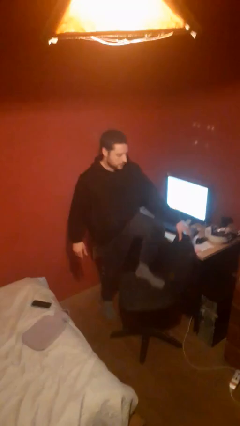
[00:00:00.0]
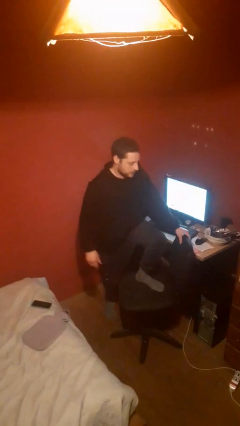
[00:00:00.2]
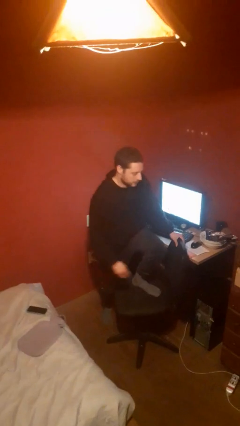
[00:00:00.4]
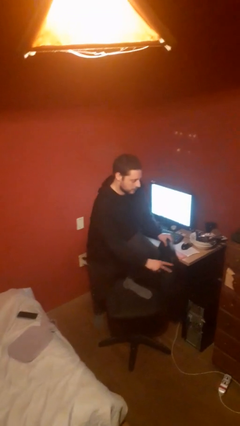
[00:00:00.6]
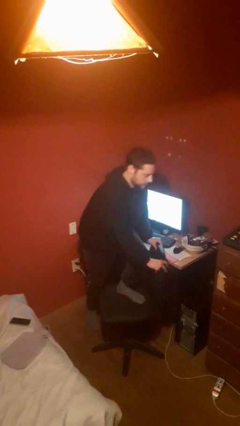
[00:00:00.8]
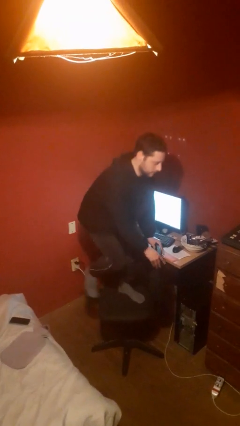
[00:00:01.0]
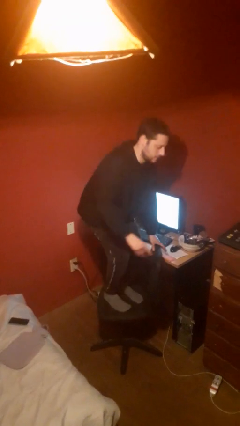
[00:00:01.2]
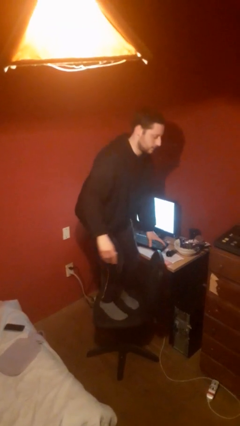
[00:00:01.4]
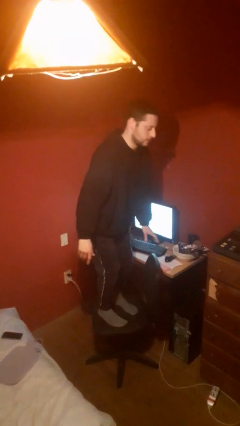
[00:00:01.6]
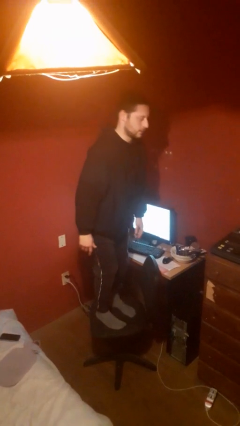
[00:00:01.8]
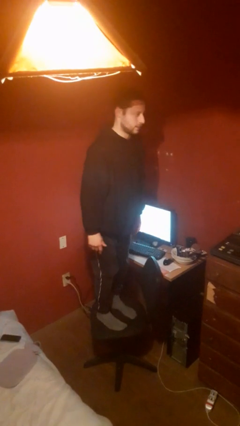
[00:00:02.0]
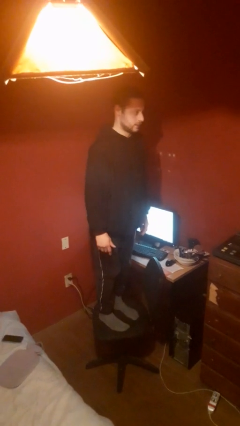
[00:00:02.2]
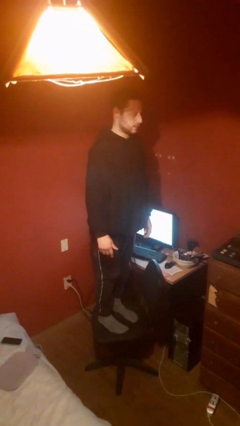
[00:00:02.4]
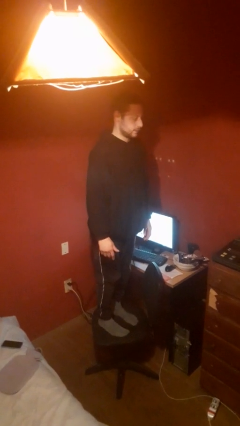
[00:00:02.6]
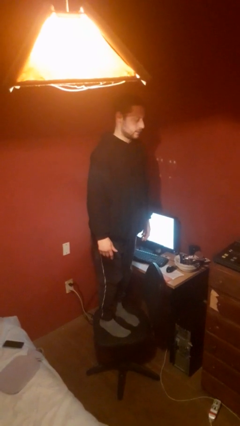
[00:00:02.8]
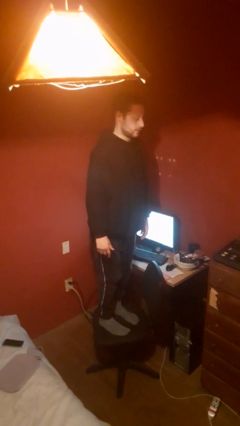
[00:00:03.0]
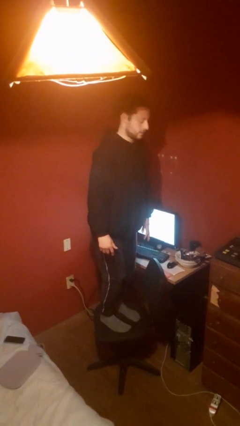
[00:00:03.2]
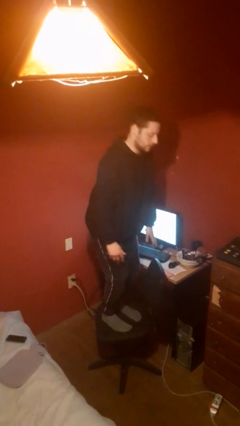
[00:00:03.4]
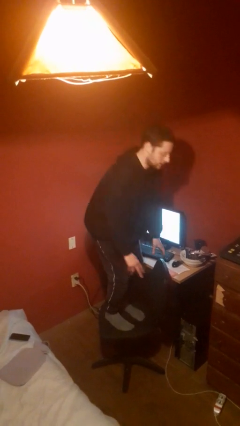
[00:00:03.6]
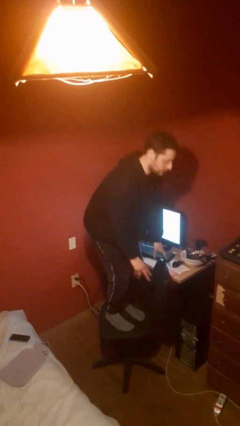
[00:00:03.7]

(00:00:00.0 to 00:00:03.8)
person climbs on chair

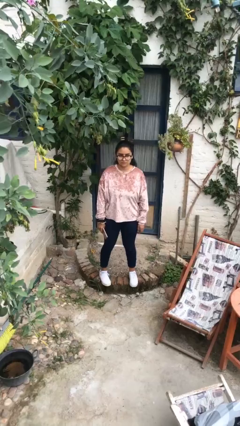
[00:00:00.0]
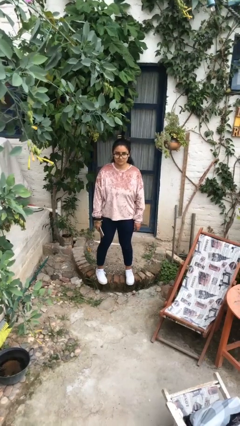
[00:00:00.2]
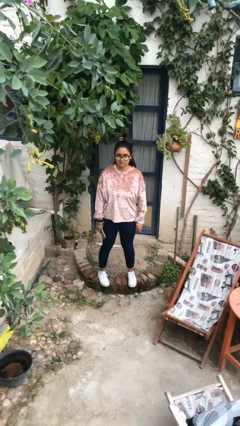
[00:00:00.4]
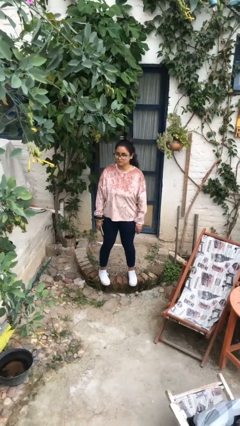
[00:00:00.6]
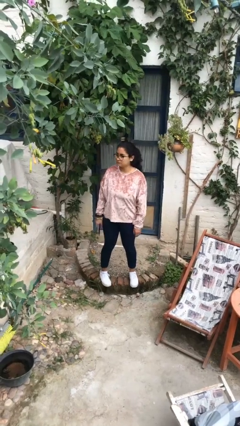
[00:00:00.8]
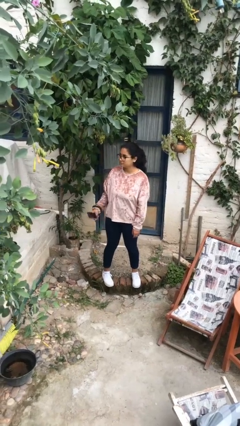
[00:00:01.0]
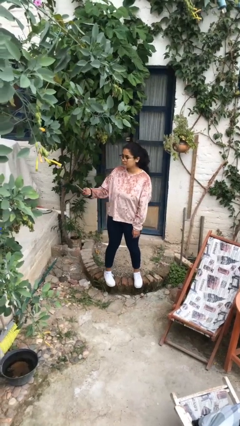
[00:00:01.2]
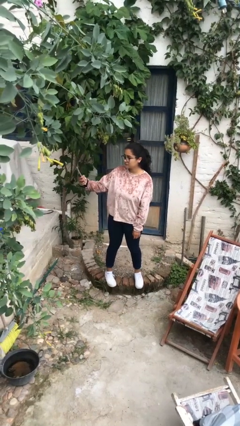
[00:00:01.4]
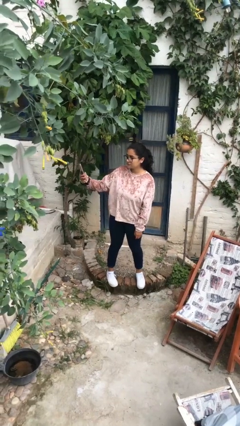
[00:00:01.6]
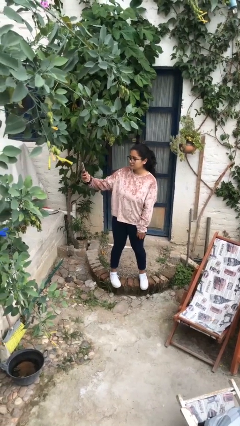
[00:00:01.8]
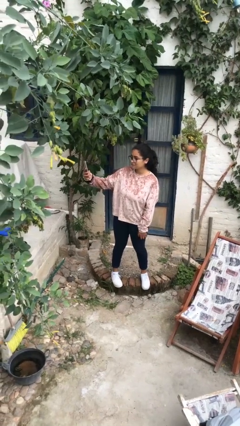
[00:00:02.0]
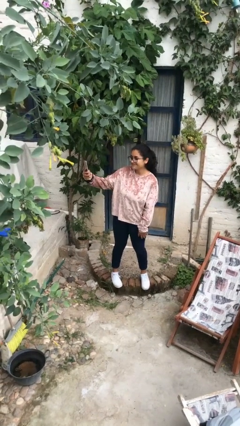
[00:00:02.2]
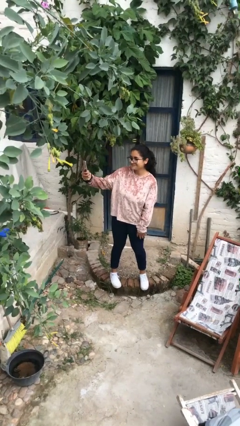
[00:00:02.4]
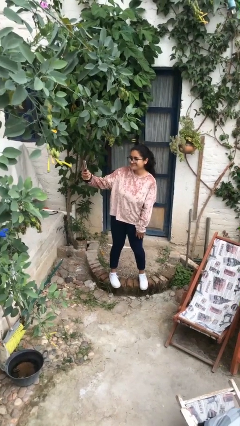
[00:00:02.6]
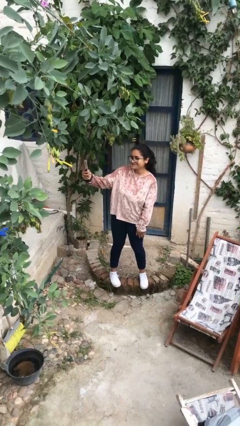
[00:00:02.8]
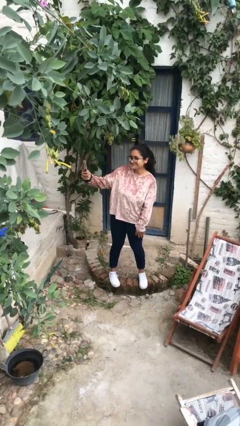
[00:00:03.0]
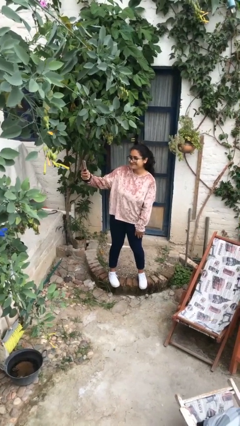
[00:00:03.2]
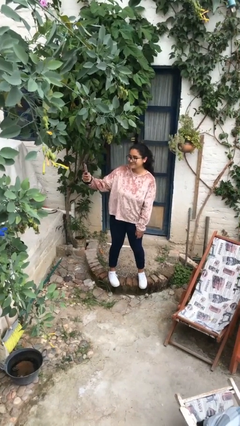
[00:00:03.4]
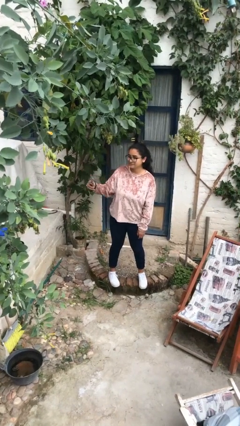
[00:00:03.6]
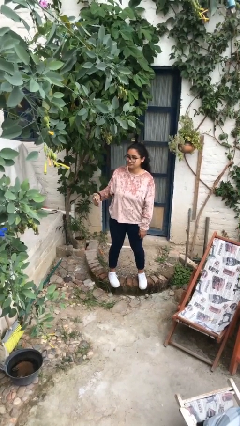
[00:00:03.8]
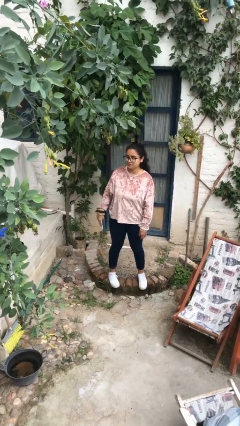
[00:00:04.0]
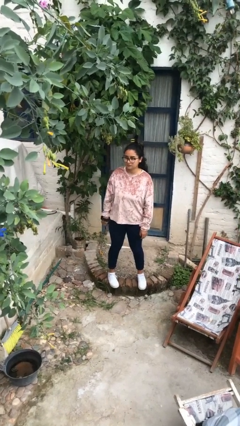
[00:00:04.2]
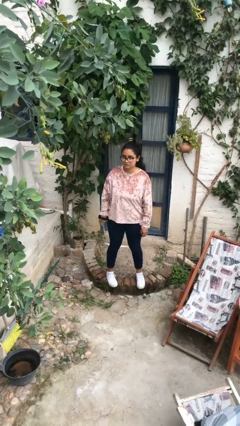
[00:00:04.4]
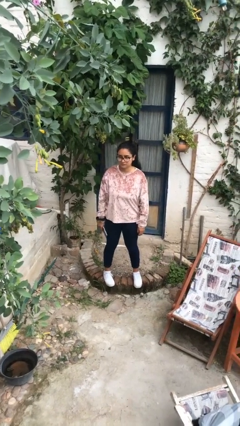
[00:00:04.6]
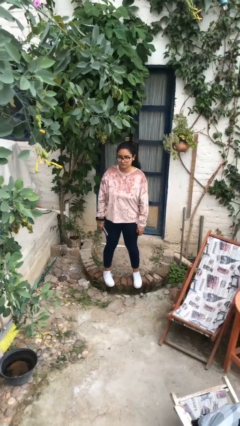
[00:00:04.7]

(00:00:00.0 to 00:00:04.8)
person takes selfie

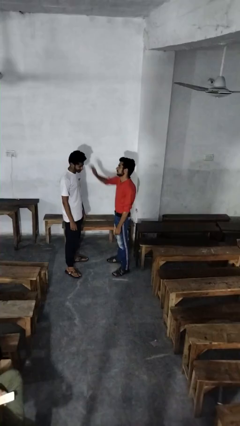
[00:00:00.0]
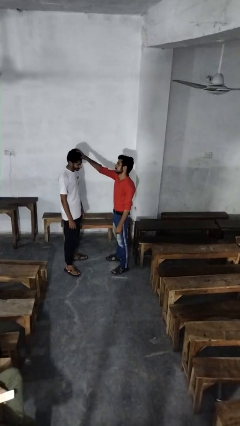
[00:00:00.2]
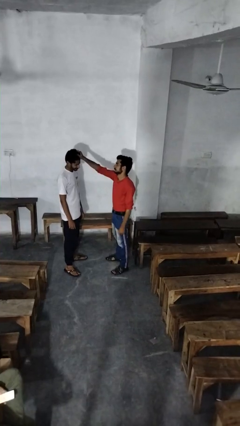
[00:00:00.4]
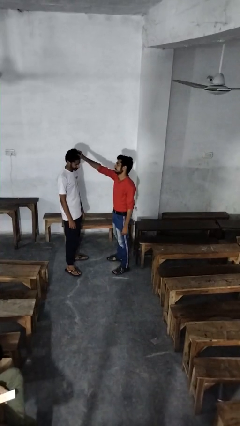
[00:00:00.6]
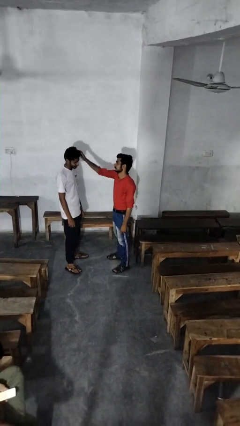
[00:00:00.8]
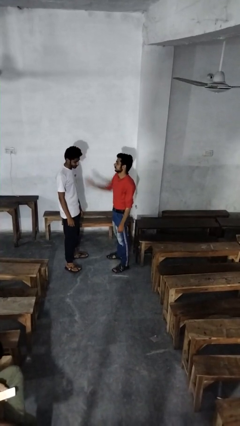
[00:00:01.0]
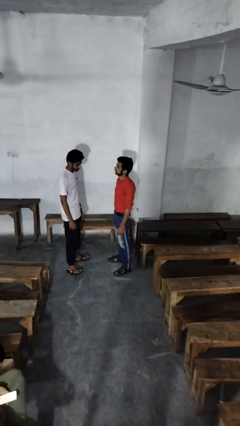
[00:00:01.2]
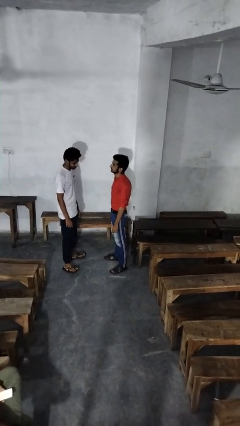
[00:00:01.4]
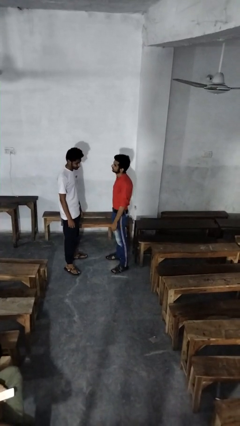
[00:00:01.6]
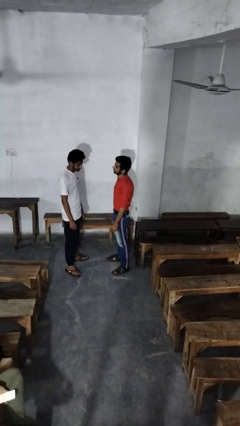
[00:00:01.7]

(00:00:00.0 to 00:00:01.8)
person grabs person by hair

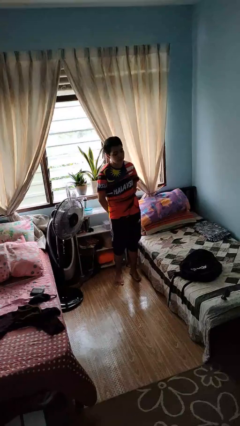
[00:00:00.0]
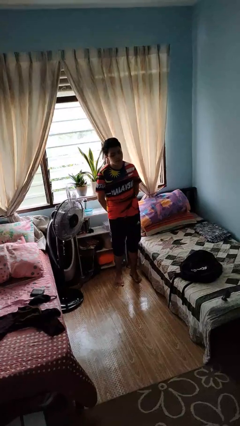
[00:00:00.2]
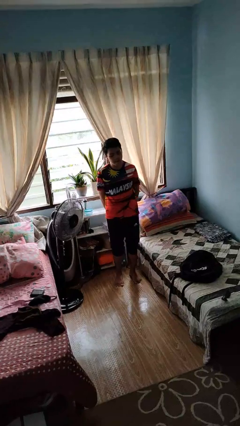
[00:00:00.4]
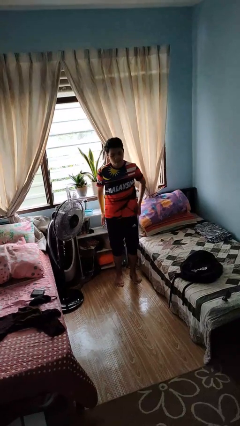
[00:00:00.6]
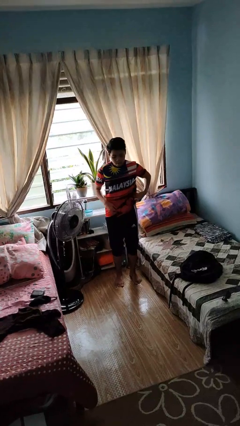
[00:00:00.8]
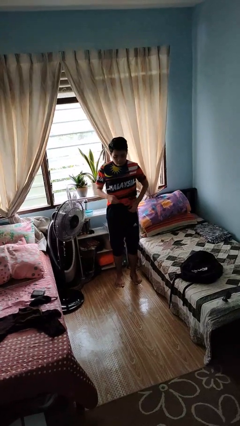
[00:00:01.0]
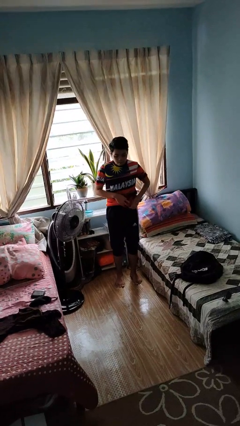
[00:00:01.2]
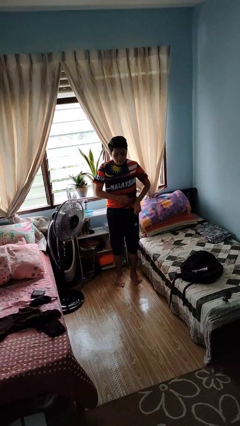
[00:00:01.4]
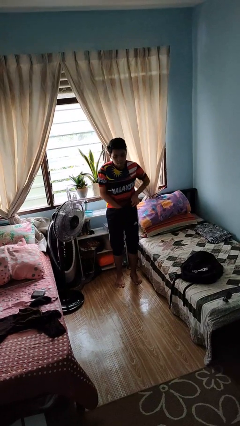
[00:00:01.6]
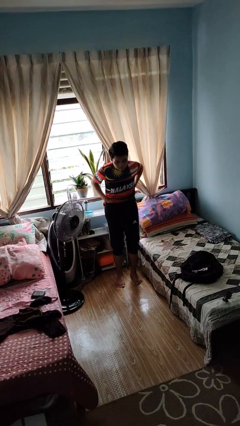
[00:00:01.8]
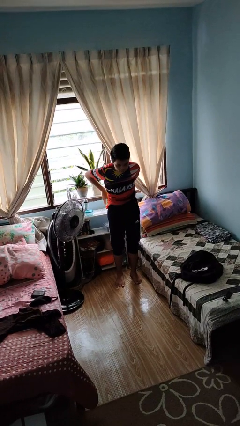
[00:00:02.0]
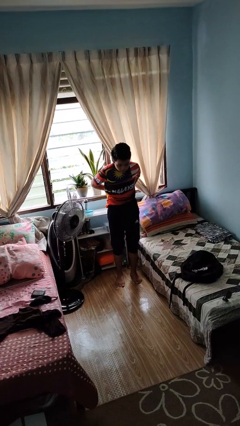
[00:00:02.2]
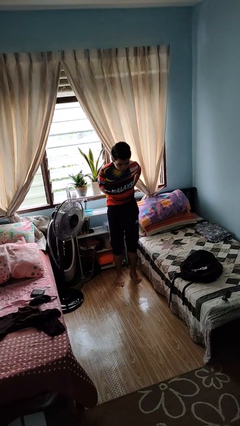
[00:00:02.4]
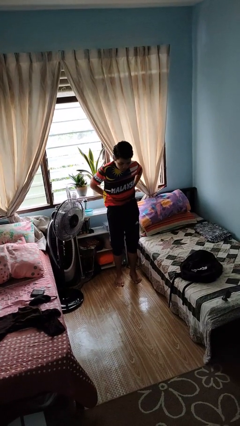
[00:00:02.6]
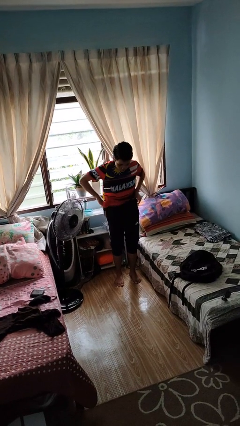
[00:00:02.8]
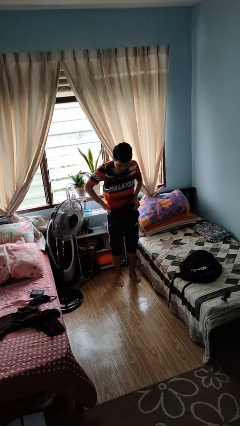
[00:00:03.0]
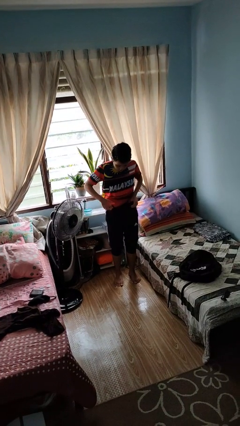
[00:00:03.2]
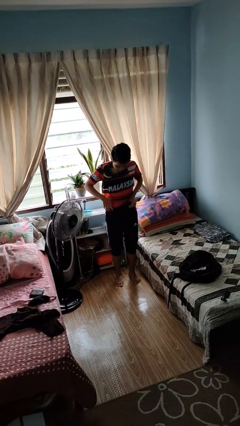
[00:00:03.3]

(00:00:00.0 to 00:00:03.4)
person tucks in shirt

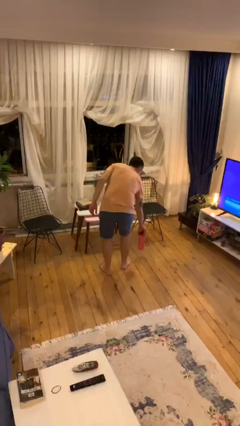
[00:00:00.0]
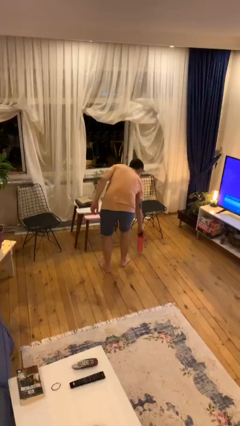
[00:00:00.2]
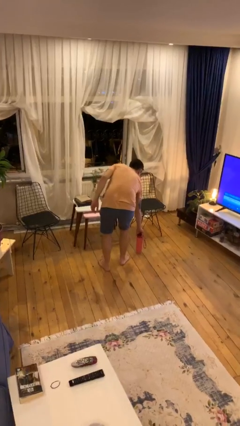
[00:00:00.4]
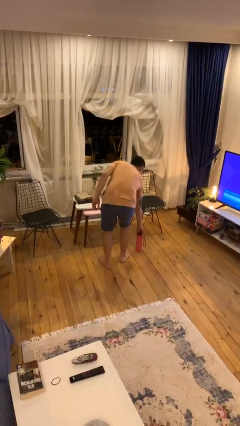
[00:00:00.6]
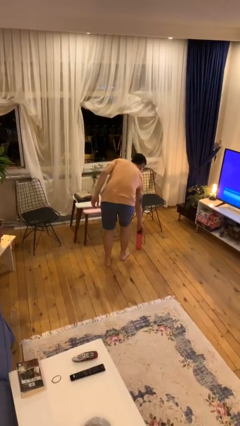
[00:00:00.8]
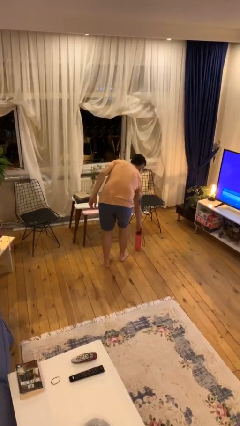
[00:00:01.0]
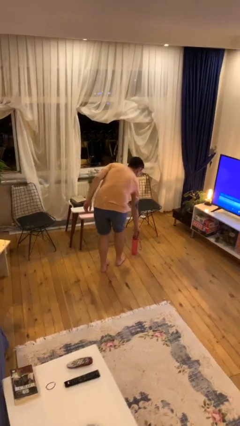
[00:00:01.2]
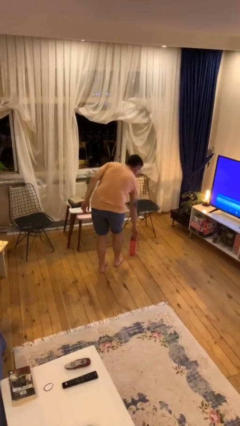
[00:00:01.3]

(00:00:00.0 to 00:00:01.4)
person puts down object on floor

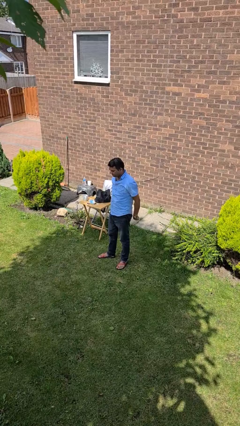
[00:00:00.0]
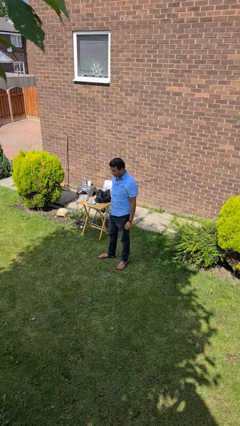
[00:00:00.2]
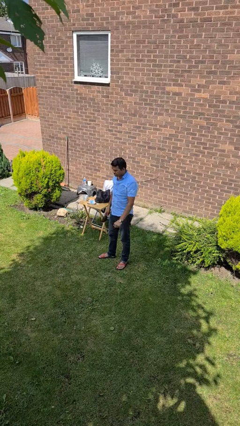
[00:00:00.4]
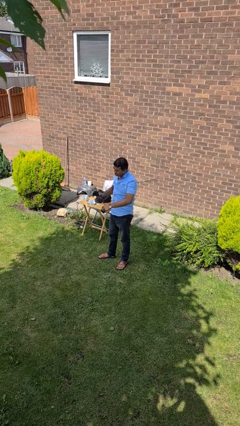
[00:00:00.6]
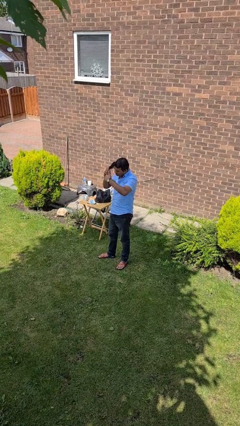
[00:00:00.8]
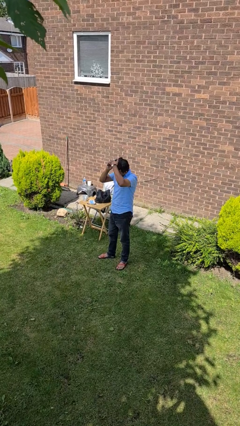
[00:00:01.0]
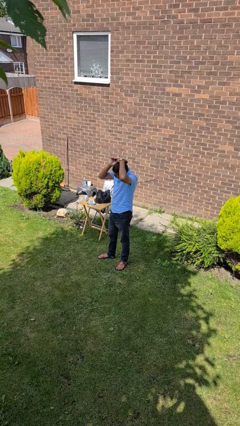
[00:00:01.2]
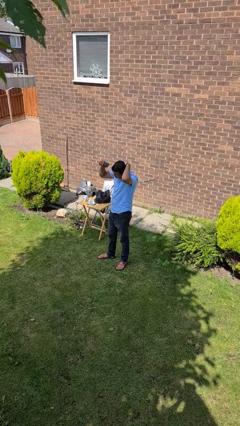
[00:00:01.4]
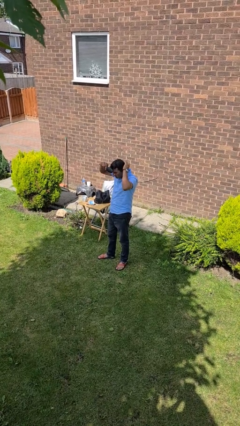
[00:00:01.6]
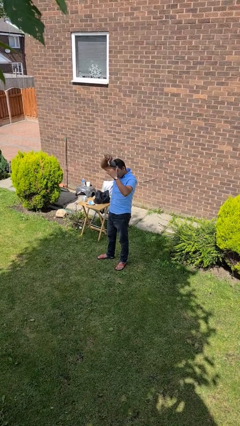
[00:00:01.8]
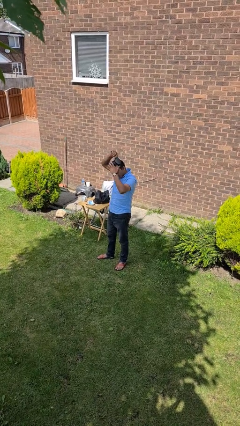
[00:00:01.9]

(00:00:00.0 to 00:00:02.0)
person brushes hair
